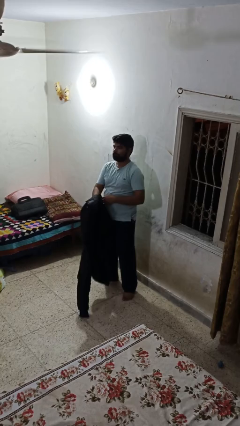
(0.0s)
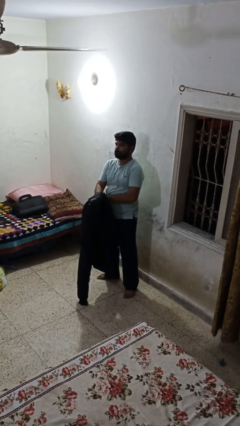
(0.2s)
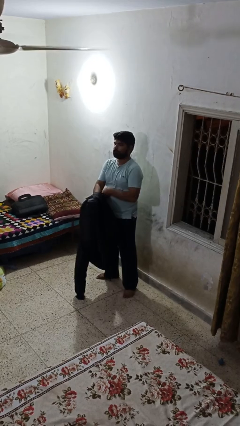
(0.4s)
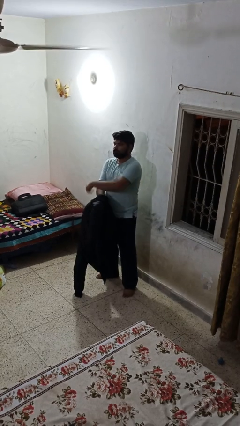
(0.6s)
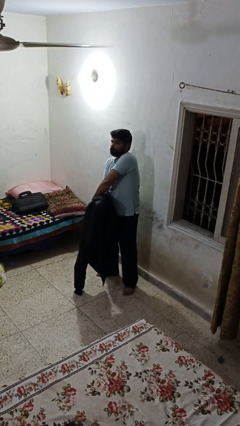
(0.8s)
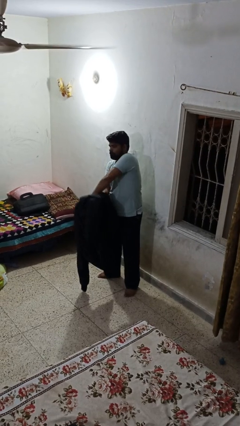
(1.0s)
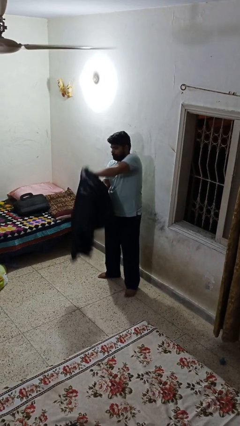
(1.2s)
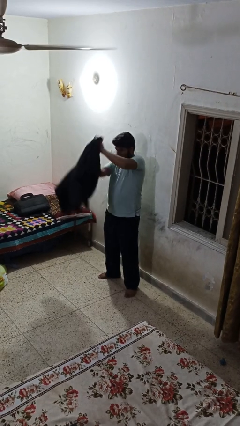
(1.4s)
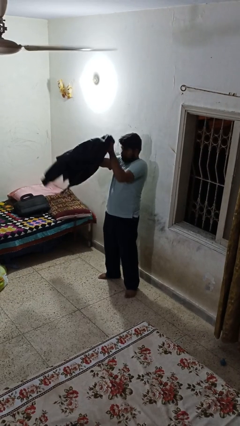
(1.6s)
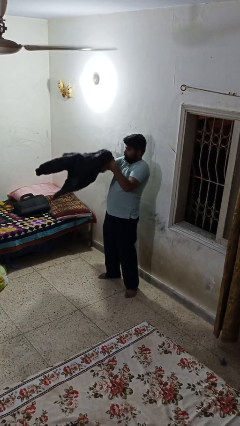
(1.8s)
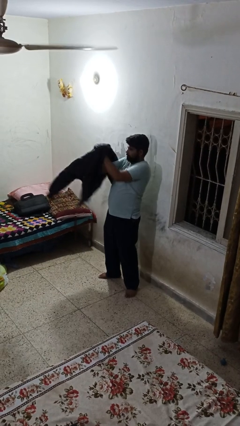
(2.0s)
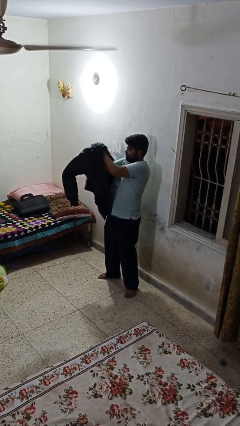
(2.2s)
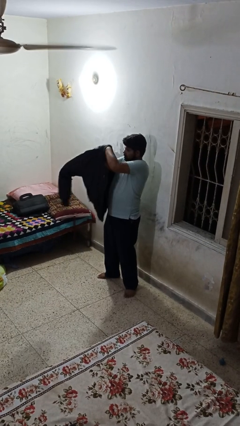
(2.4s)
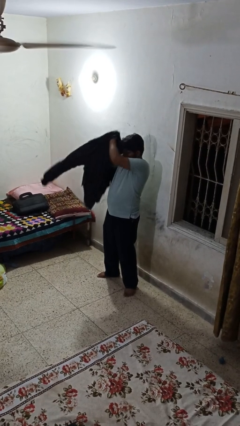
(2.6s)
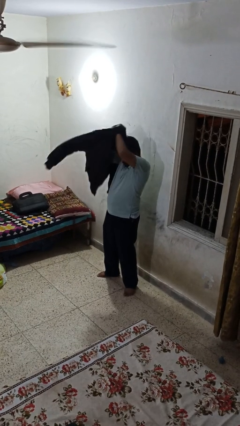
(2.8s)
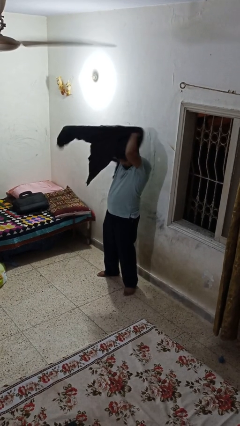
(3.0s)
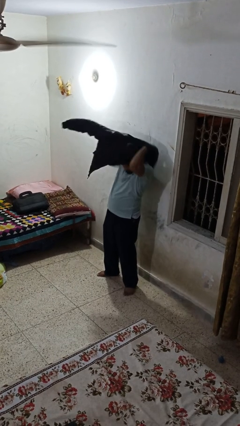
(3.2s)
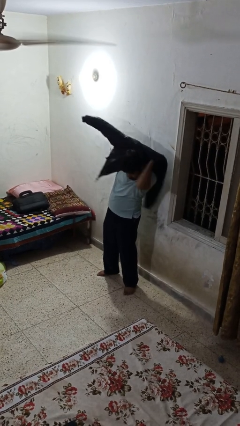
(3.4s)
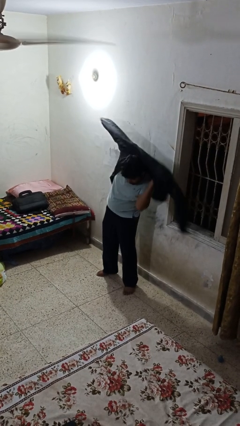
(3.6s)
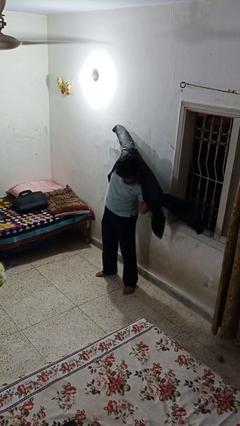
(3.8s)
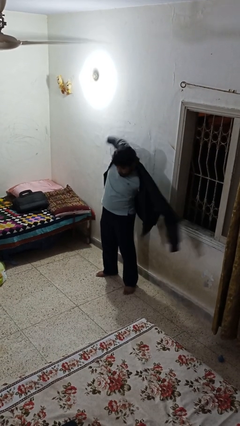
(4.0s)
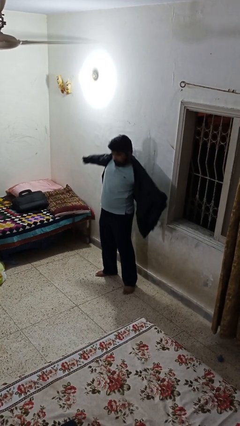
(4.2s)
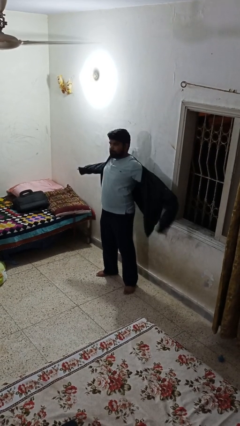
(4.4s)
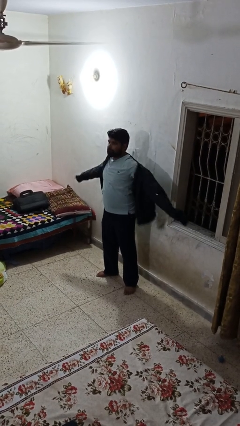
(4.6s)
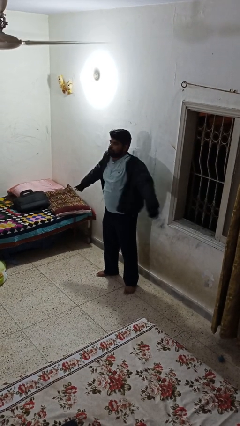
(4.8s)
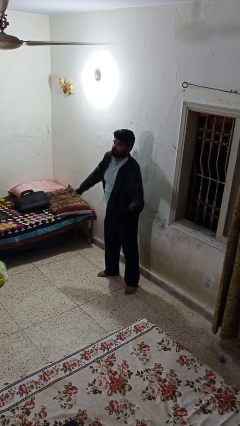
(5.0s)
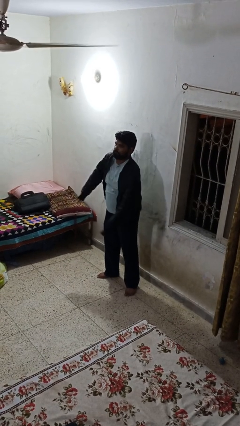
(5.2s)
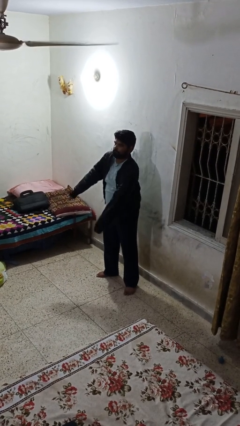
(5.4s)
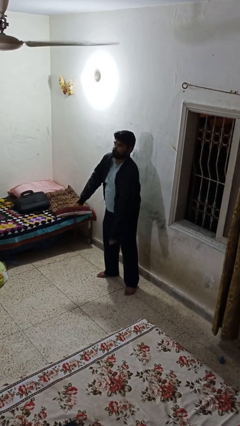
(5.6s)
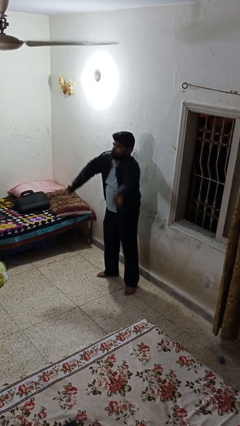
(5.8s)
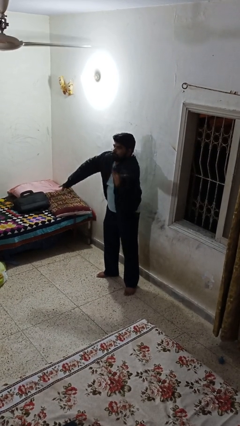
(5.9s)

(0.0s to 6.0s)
person puts on jacket

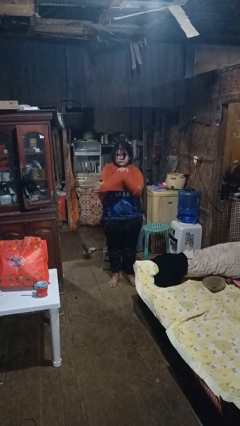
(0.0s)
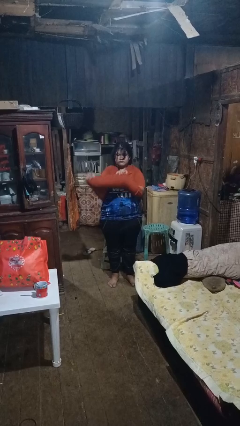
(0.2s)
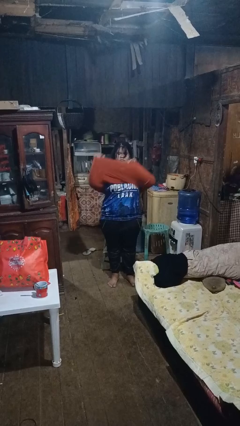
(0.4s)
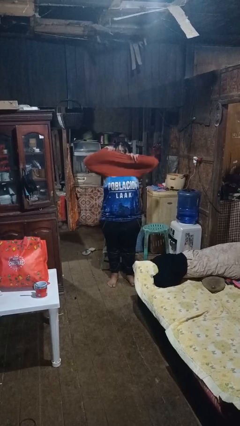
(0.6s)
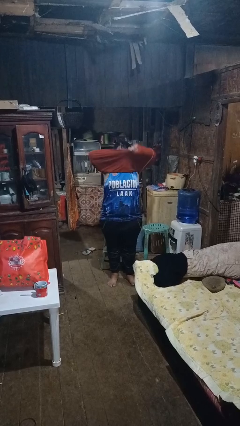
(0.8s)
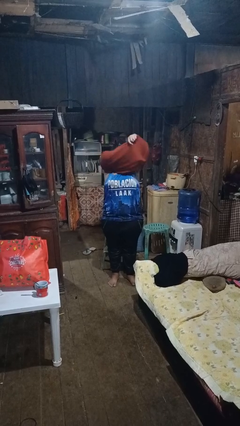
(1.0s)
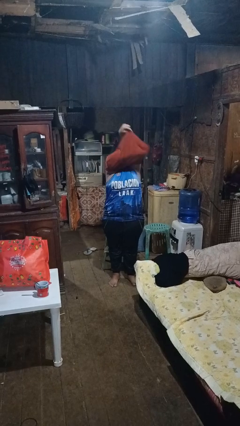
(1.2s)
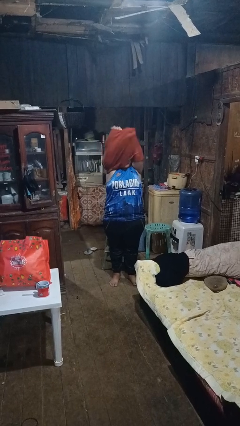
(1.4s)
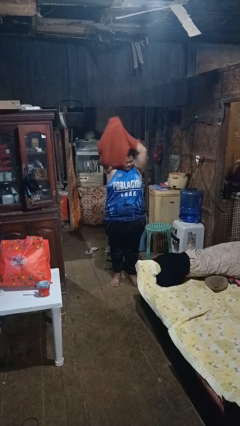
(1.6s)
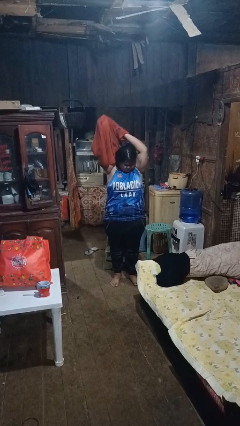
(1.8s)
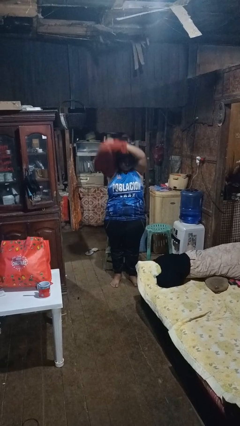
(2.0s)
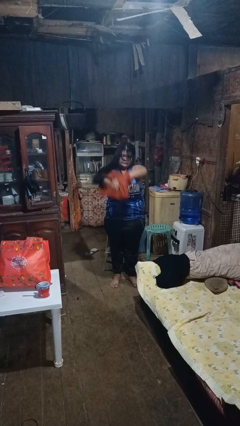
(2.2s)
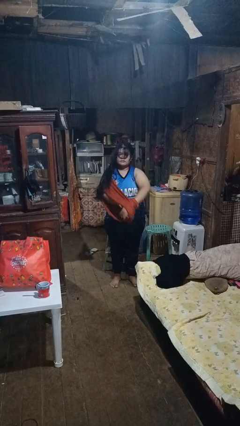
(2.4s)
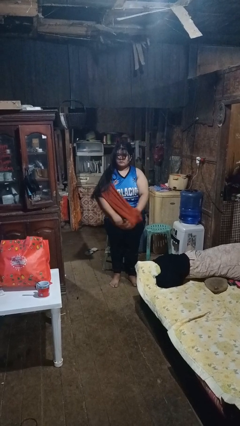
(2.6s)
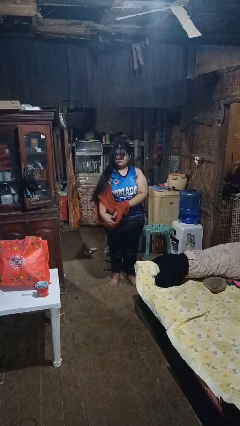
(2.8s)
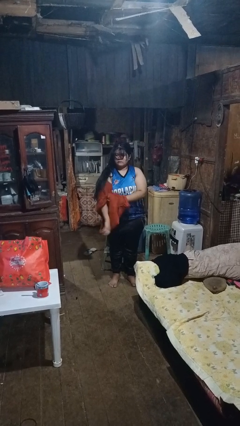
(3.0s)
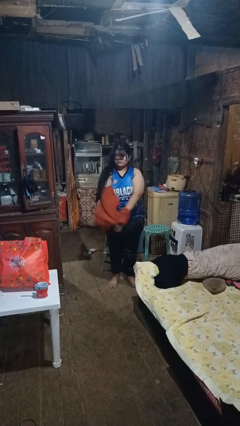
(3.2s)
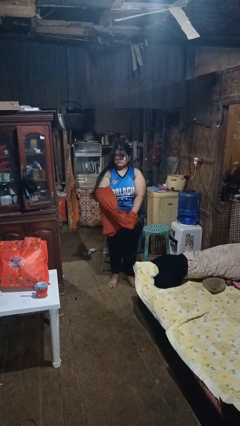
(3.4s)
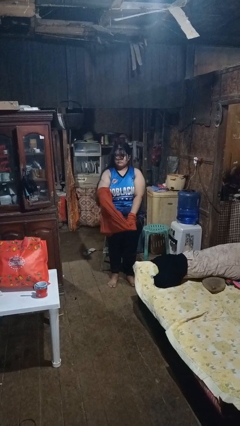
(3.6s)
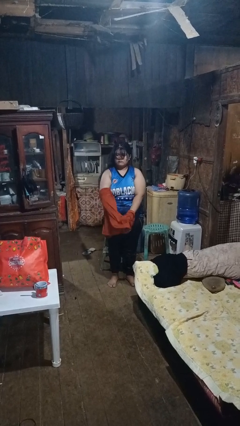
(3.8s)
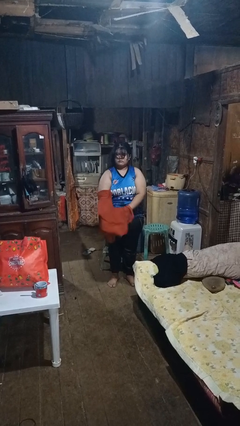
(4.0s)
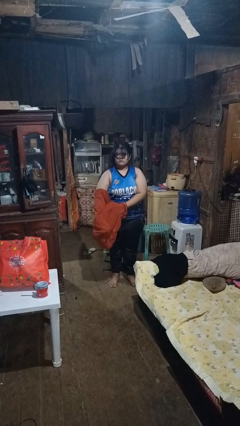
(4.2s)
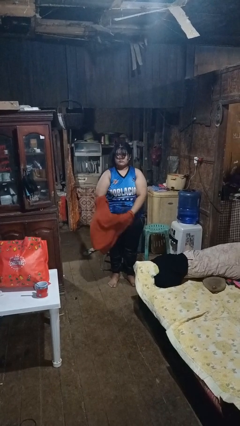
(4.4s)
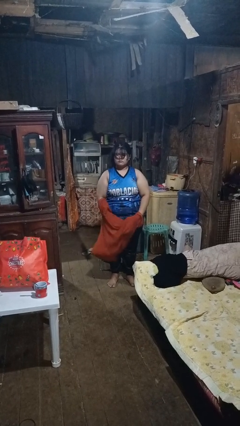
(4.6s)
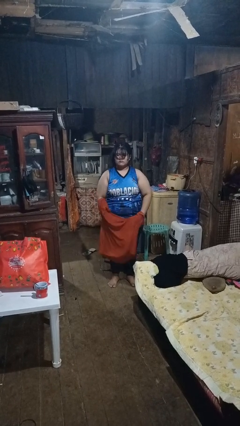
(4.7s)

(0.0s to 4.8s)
person takes off shirt

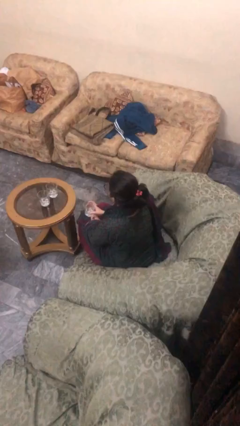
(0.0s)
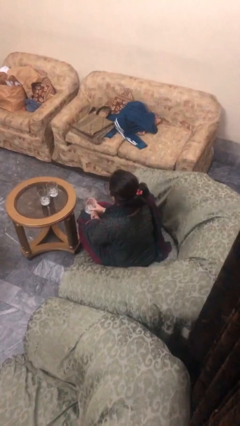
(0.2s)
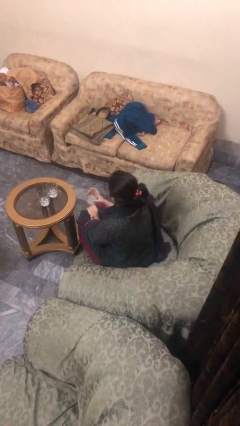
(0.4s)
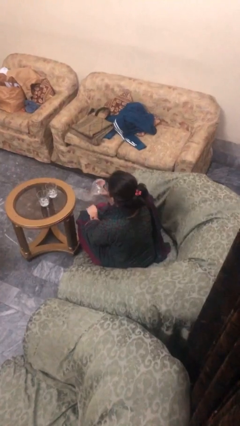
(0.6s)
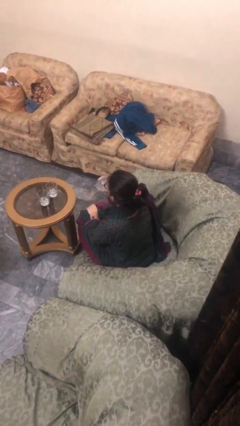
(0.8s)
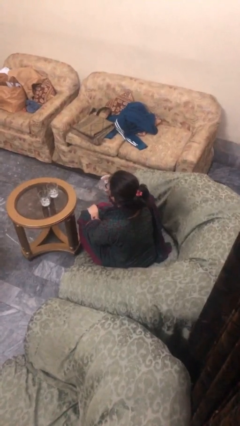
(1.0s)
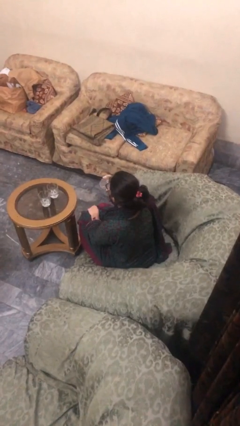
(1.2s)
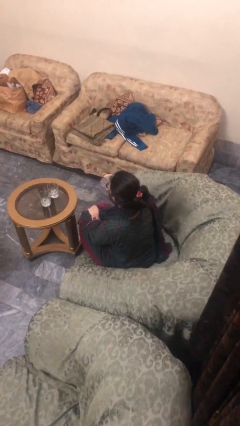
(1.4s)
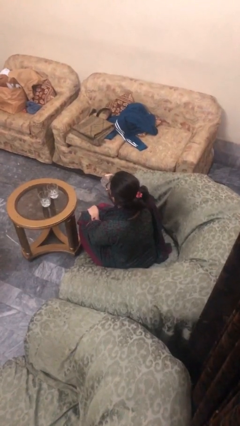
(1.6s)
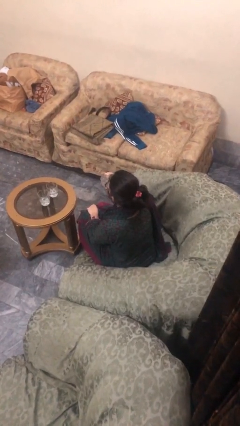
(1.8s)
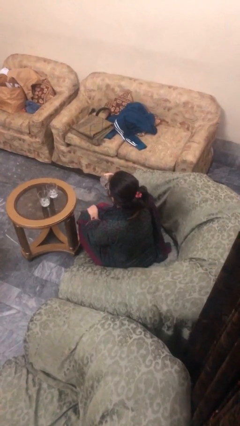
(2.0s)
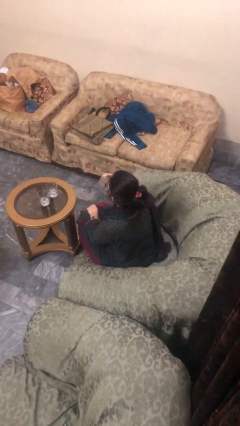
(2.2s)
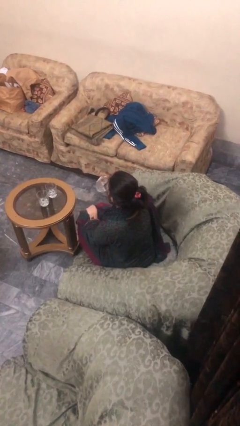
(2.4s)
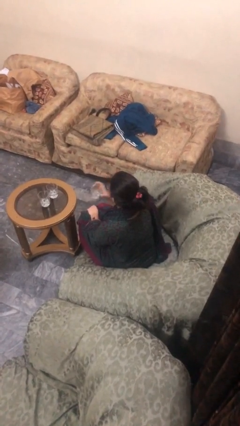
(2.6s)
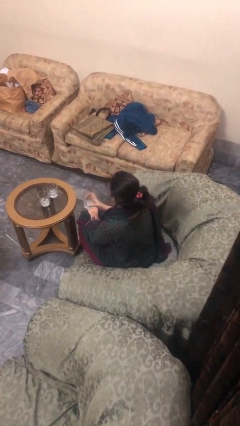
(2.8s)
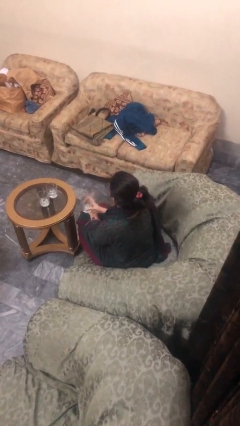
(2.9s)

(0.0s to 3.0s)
person drinks from shotglass

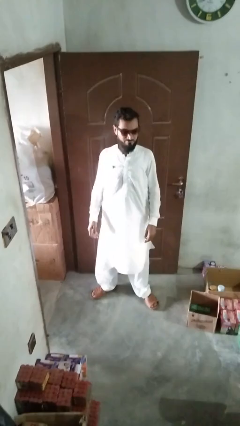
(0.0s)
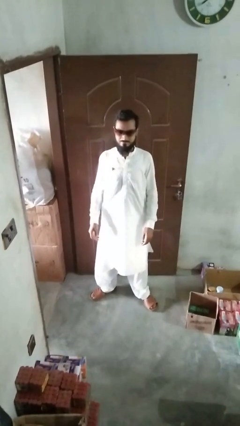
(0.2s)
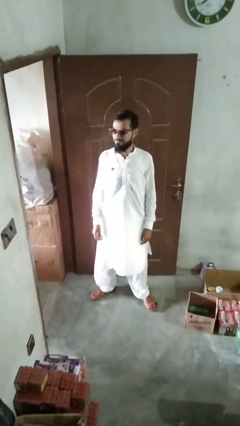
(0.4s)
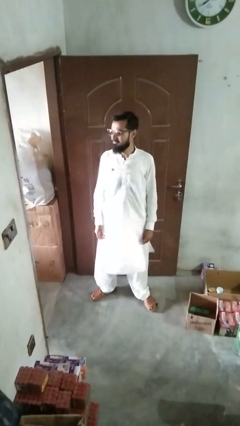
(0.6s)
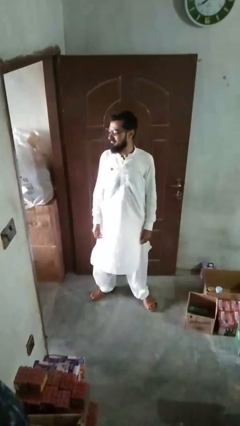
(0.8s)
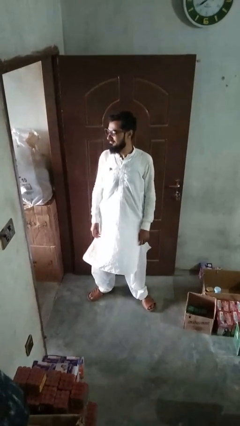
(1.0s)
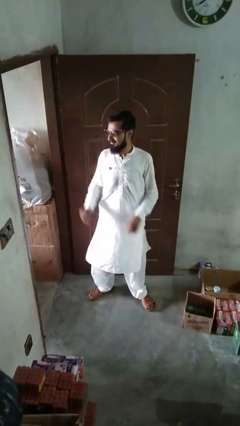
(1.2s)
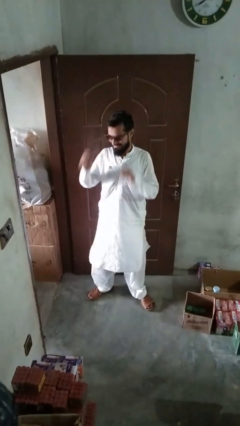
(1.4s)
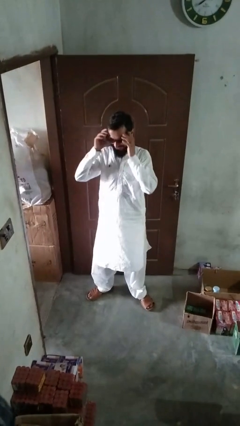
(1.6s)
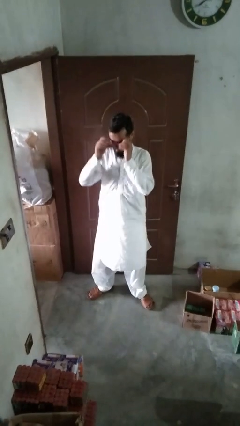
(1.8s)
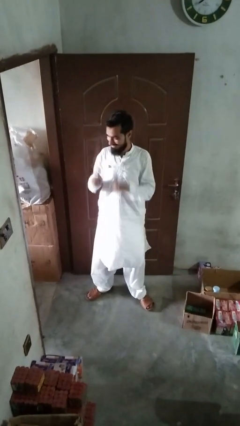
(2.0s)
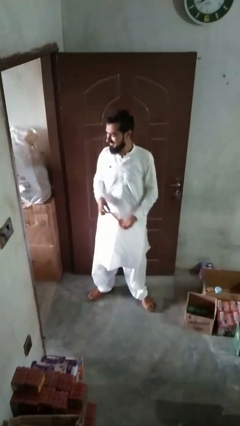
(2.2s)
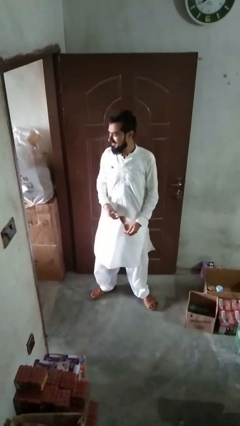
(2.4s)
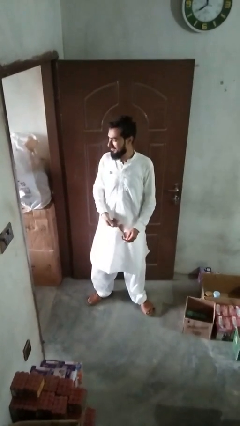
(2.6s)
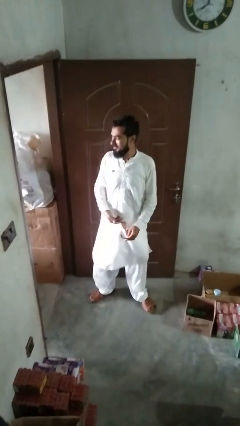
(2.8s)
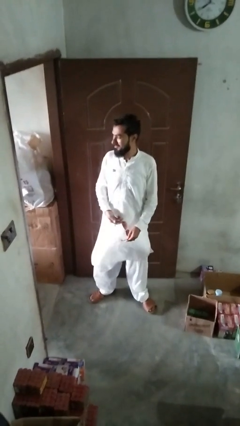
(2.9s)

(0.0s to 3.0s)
person takes off sunglasses

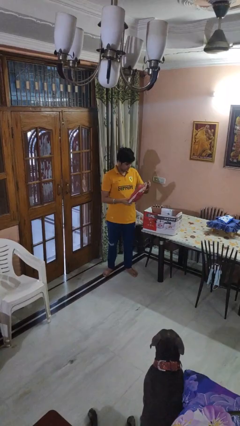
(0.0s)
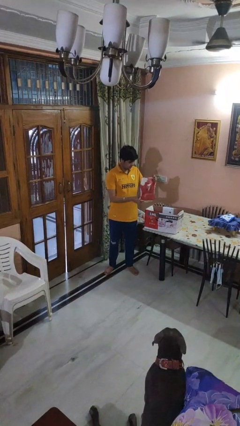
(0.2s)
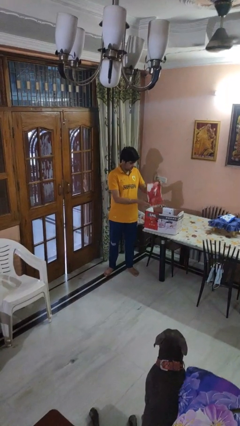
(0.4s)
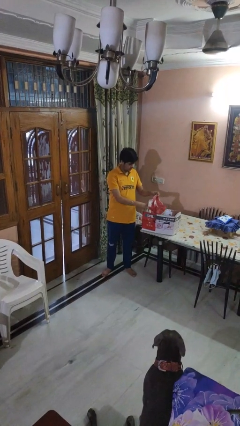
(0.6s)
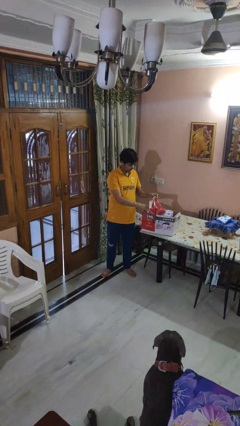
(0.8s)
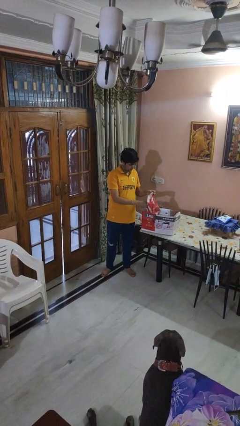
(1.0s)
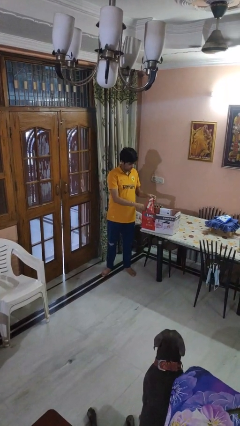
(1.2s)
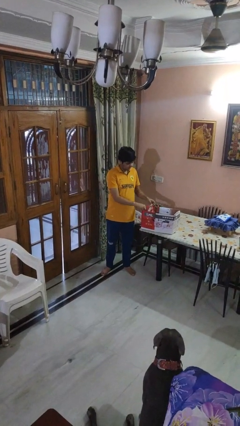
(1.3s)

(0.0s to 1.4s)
person puts object into box
